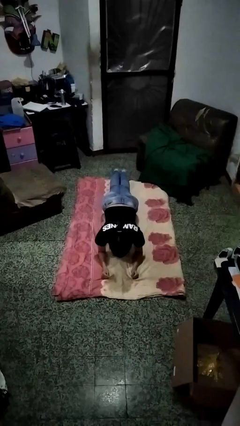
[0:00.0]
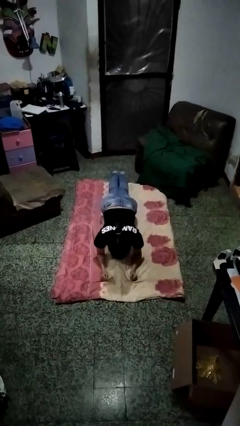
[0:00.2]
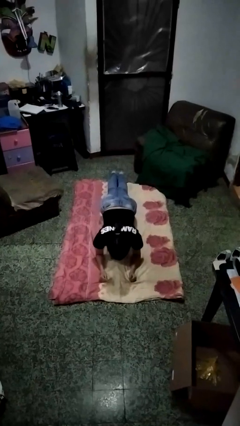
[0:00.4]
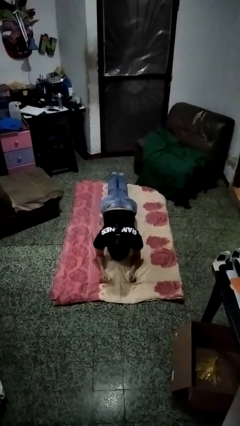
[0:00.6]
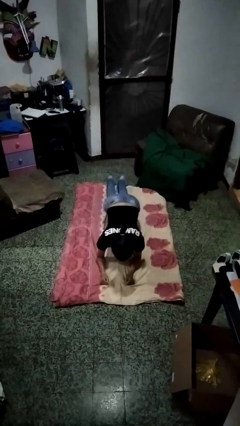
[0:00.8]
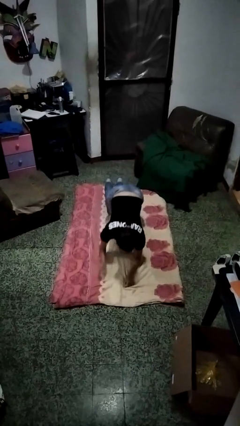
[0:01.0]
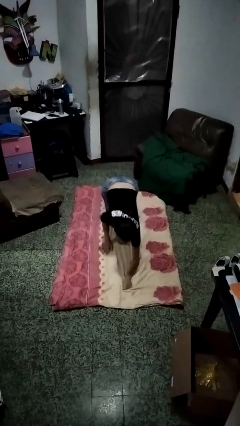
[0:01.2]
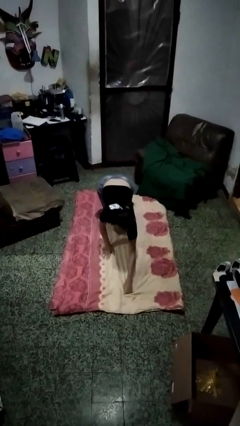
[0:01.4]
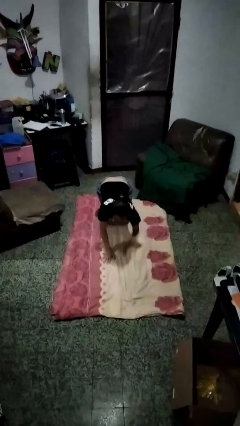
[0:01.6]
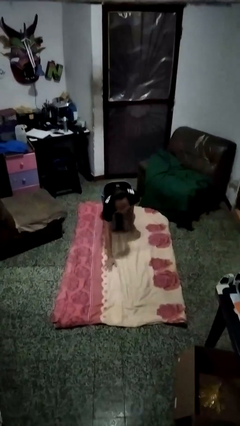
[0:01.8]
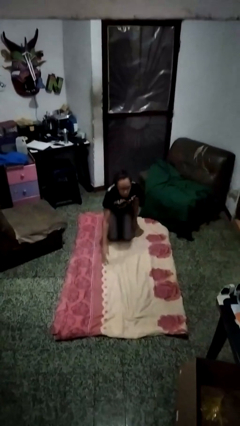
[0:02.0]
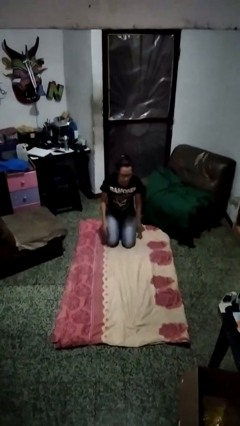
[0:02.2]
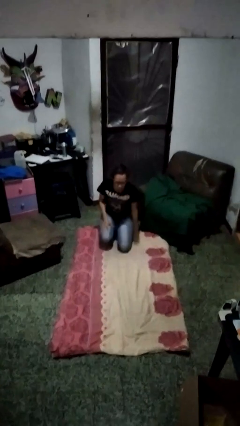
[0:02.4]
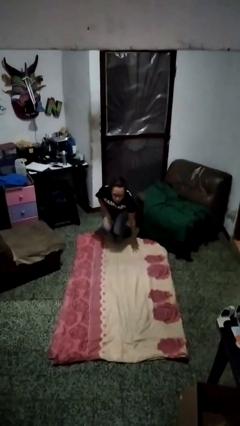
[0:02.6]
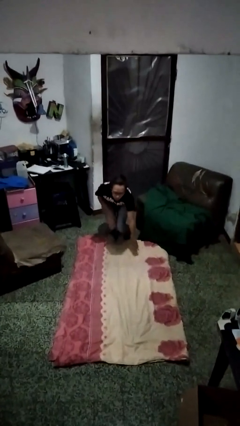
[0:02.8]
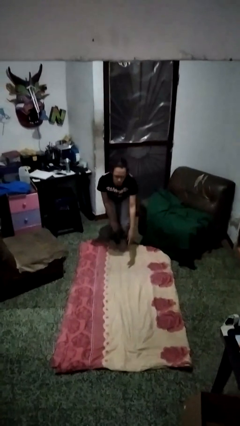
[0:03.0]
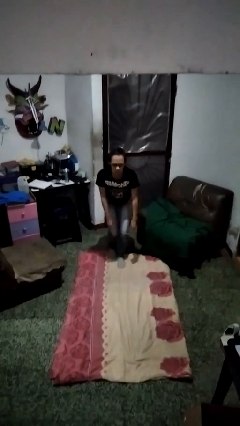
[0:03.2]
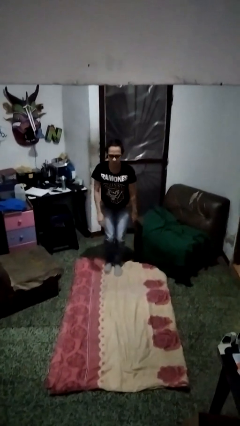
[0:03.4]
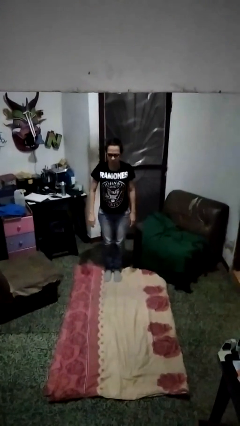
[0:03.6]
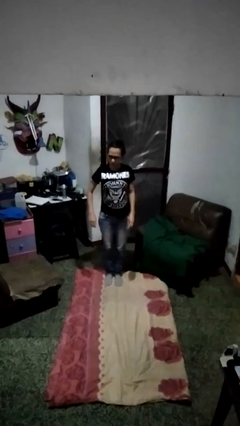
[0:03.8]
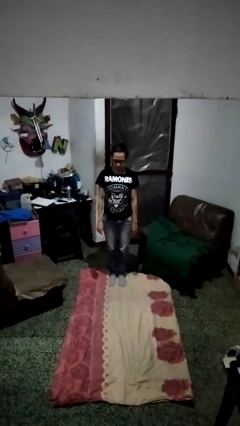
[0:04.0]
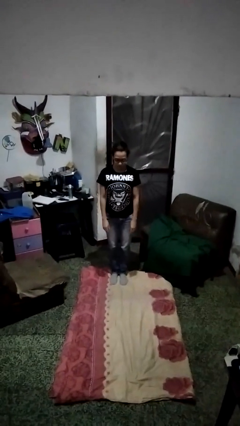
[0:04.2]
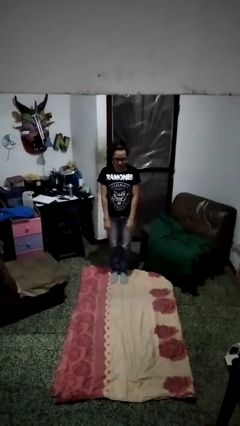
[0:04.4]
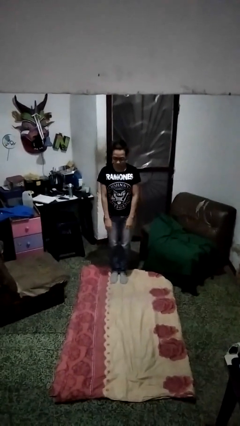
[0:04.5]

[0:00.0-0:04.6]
person stands up from floor

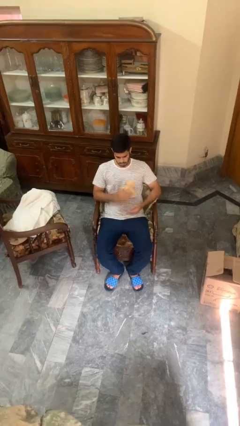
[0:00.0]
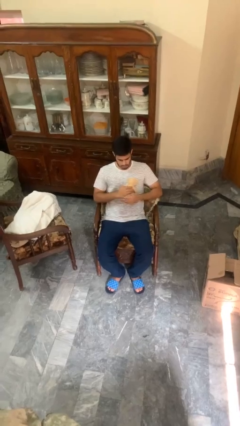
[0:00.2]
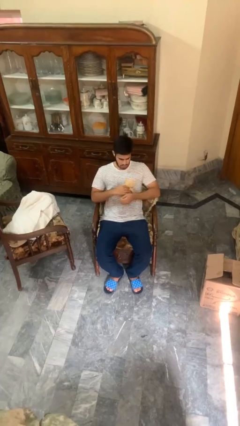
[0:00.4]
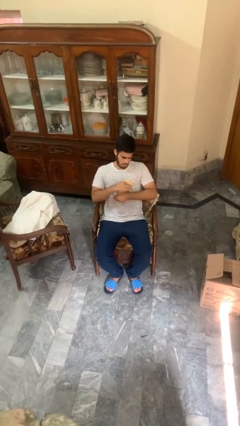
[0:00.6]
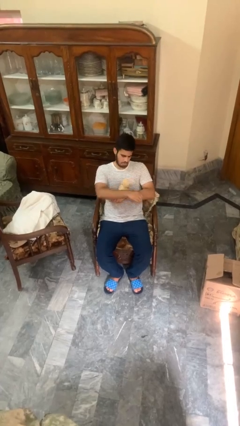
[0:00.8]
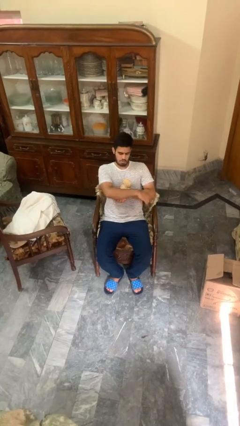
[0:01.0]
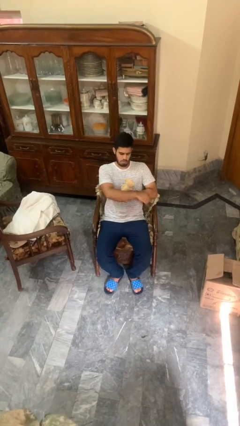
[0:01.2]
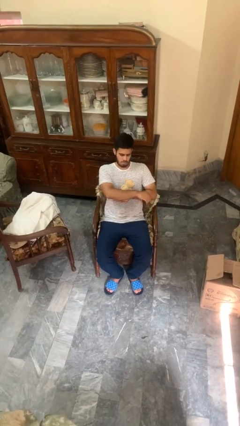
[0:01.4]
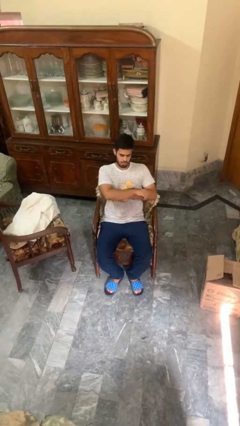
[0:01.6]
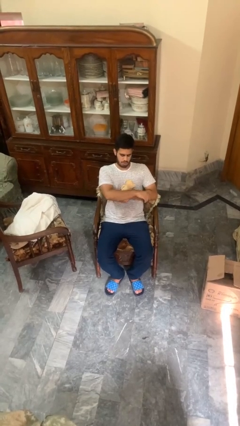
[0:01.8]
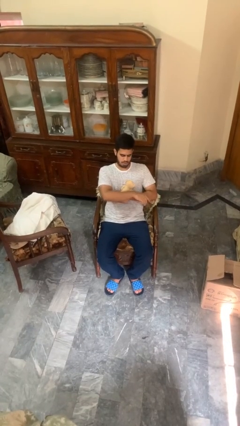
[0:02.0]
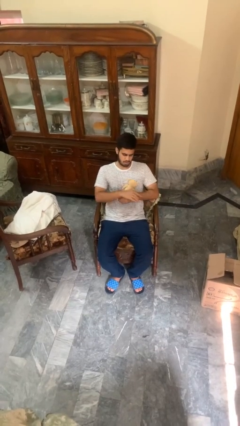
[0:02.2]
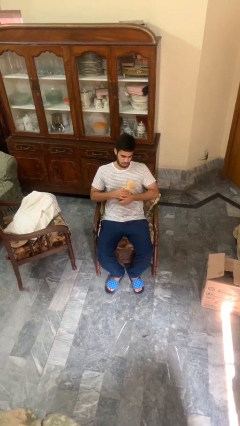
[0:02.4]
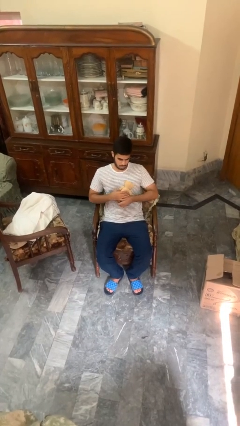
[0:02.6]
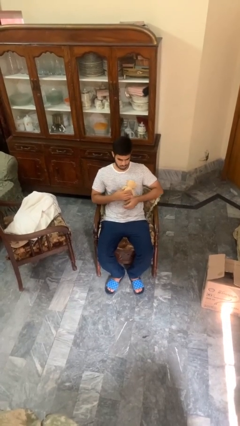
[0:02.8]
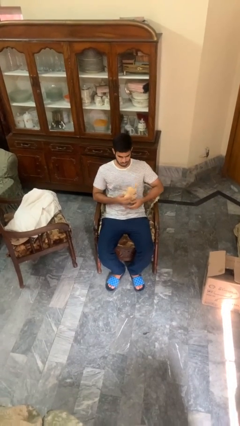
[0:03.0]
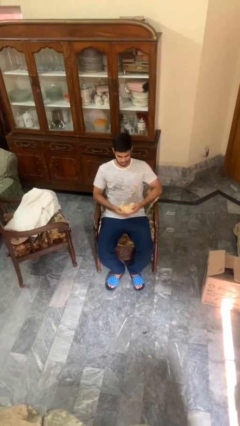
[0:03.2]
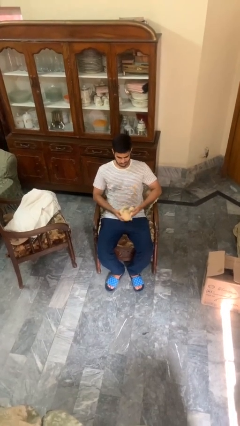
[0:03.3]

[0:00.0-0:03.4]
person hugs stuffed animal

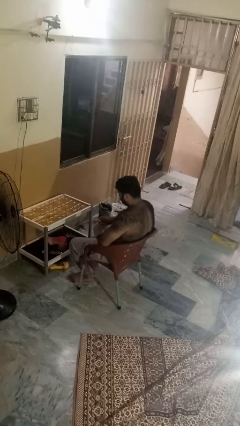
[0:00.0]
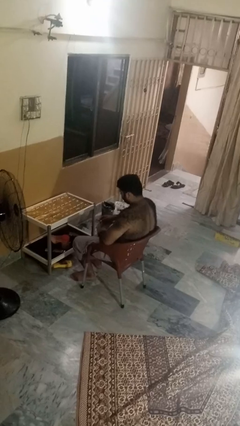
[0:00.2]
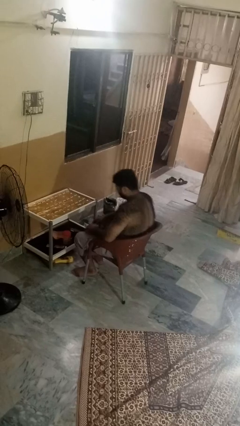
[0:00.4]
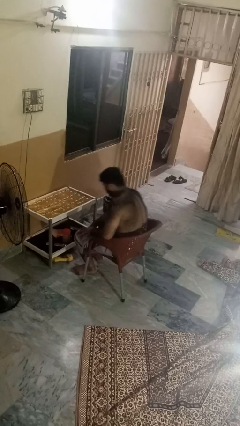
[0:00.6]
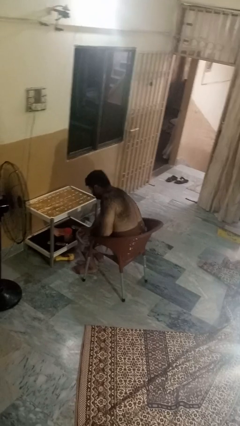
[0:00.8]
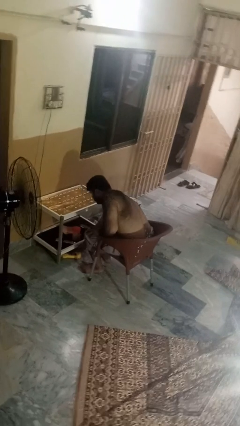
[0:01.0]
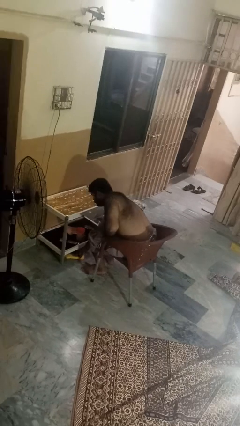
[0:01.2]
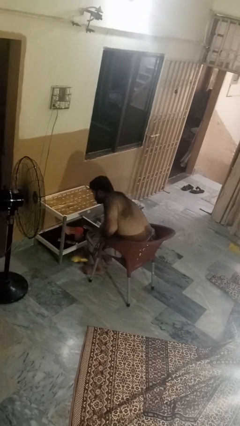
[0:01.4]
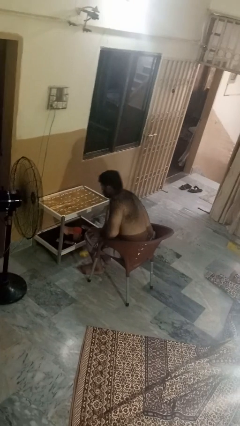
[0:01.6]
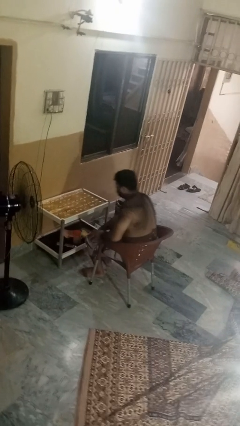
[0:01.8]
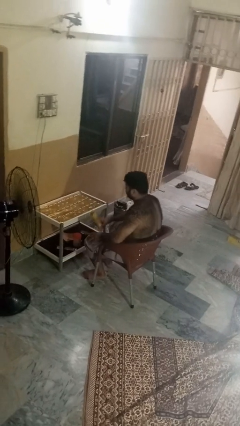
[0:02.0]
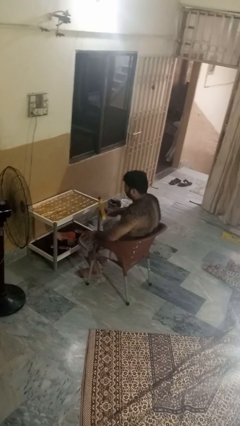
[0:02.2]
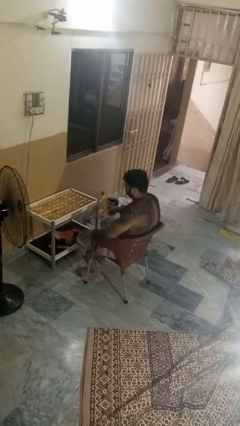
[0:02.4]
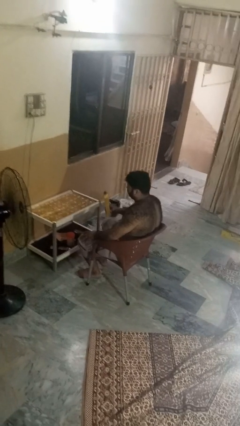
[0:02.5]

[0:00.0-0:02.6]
person picks up object from floor

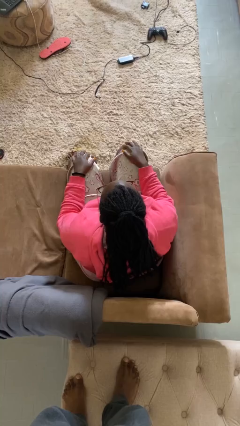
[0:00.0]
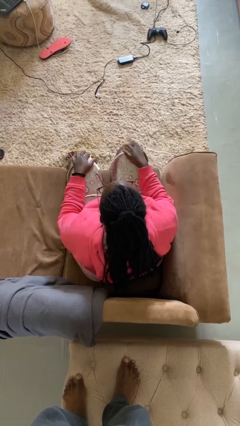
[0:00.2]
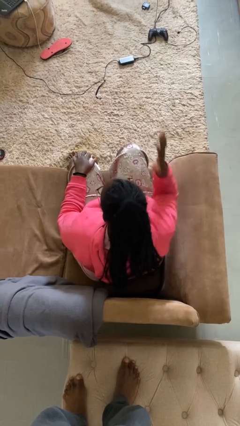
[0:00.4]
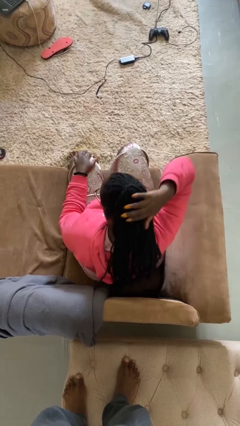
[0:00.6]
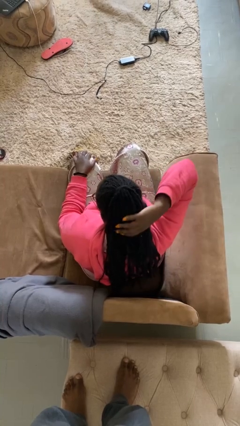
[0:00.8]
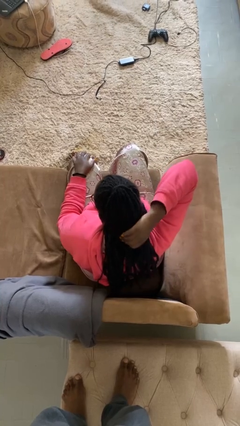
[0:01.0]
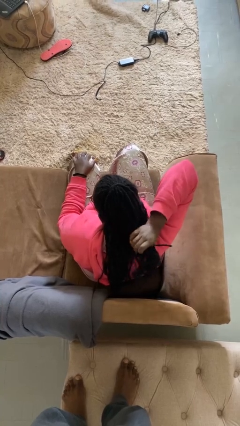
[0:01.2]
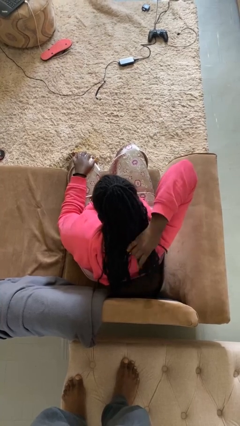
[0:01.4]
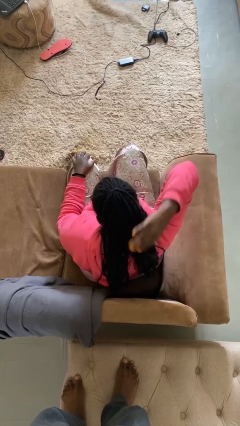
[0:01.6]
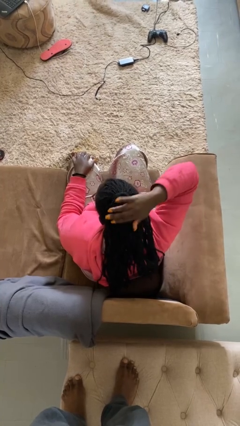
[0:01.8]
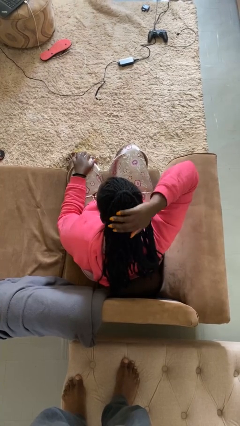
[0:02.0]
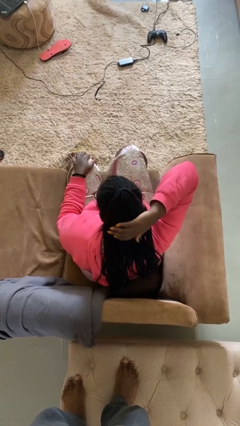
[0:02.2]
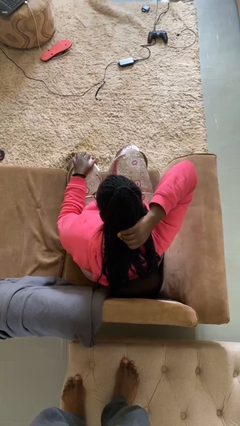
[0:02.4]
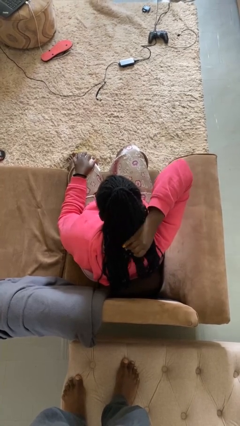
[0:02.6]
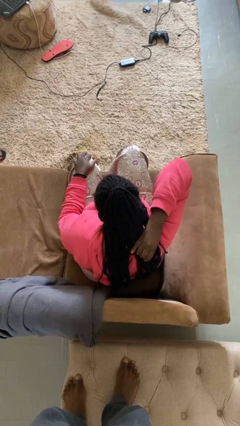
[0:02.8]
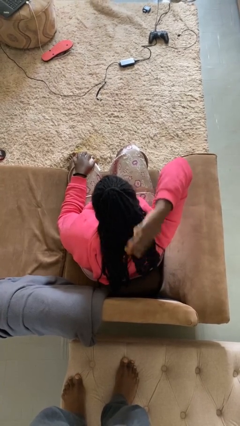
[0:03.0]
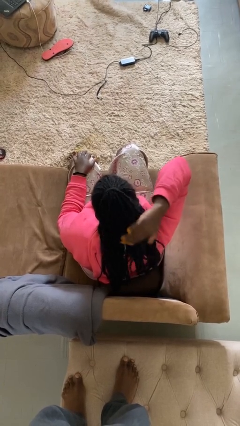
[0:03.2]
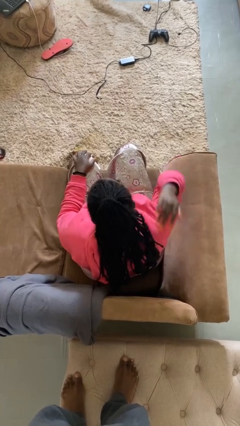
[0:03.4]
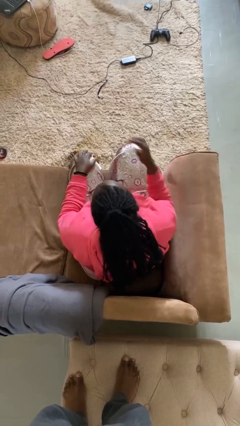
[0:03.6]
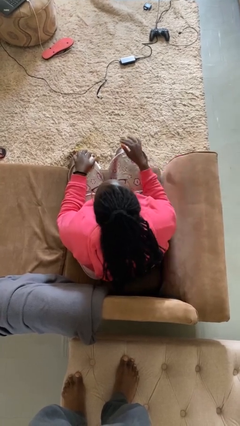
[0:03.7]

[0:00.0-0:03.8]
person strokes hair

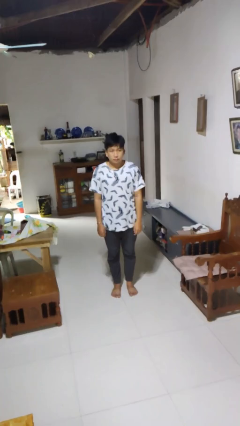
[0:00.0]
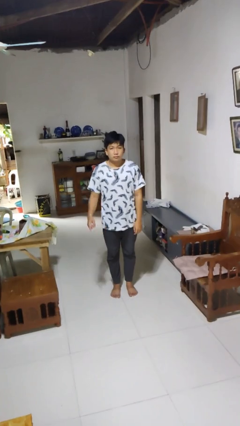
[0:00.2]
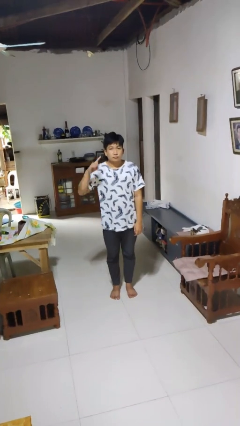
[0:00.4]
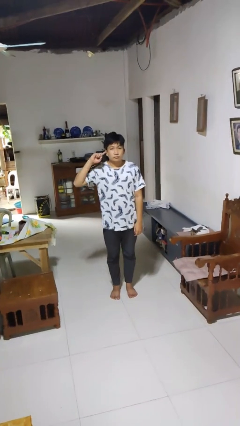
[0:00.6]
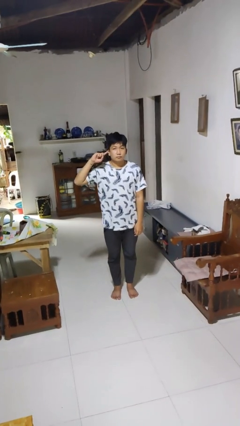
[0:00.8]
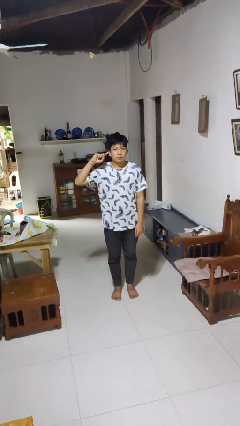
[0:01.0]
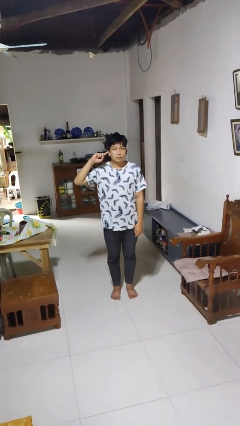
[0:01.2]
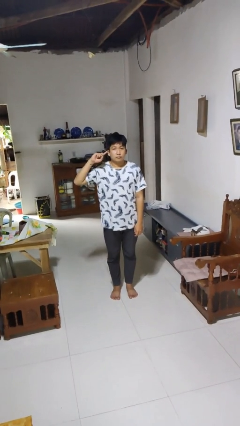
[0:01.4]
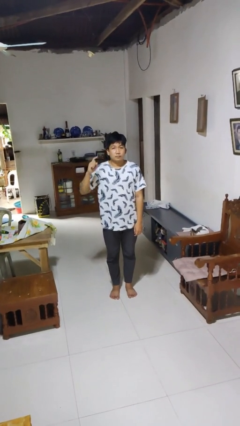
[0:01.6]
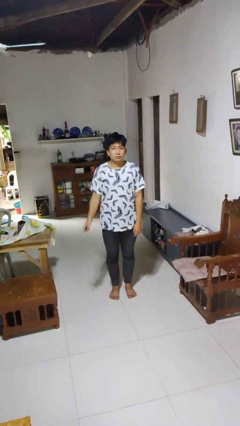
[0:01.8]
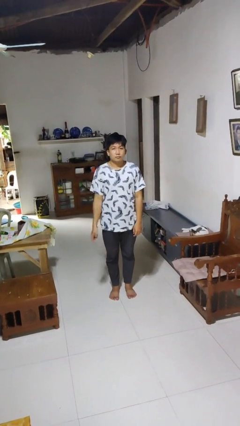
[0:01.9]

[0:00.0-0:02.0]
person gestures listen closely

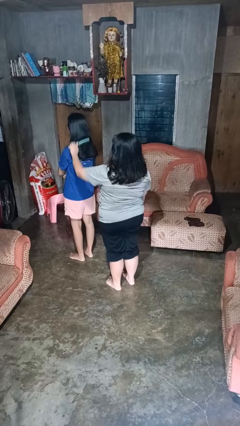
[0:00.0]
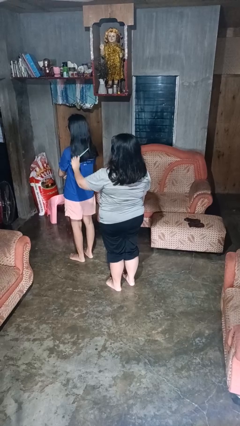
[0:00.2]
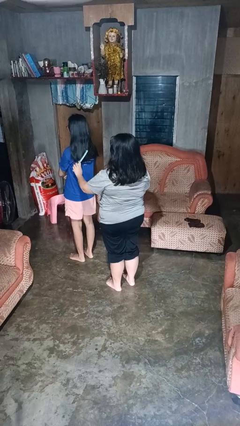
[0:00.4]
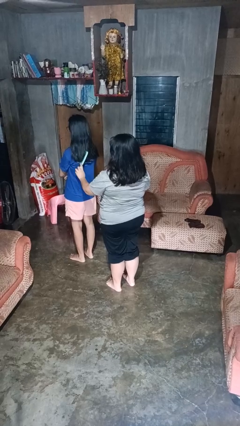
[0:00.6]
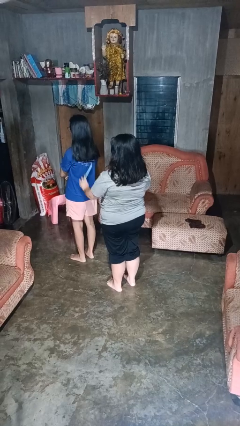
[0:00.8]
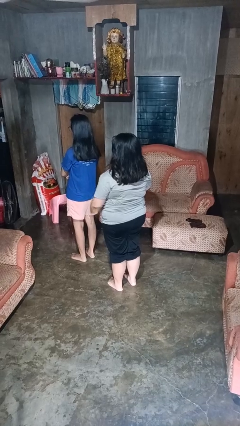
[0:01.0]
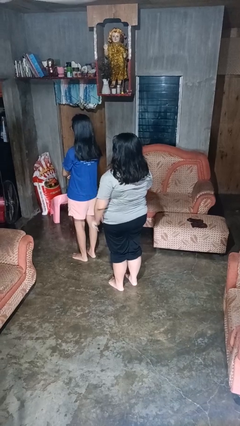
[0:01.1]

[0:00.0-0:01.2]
person brushes hair of person
